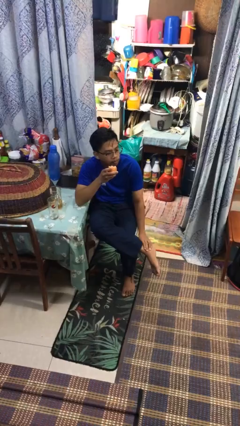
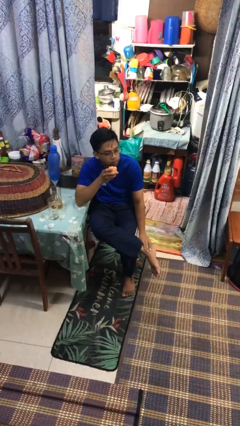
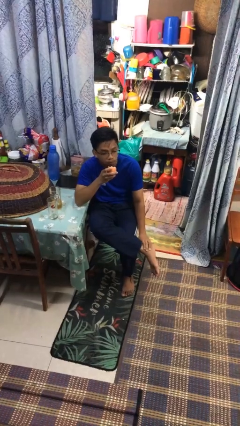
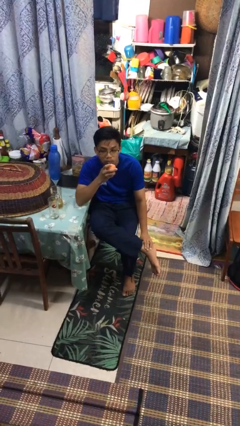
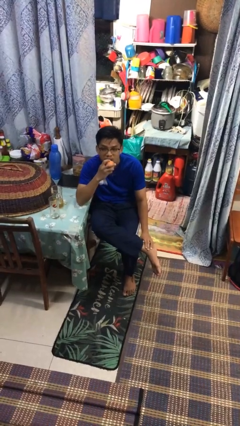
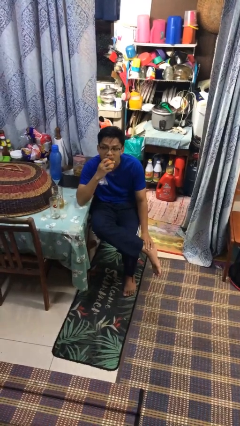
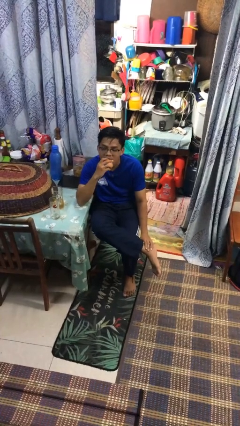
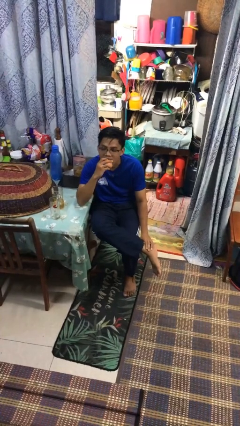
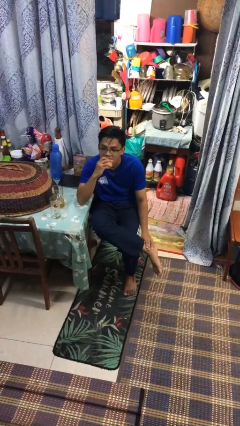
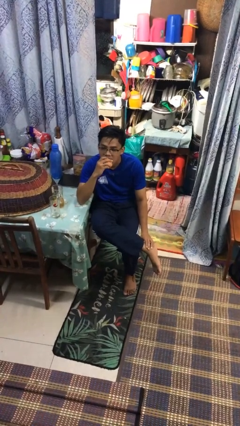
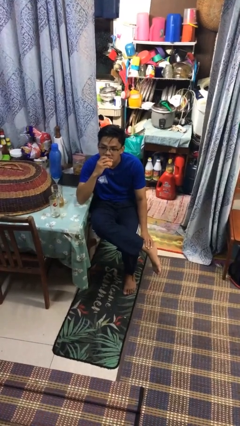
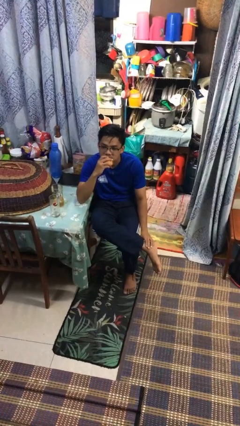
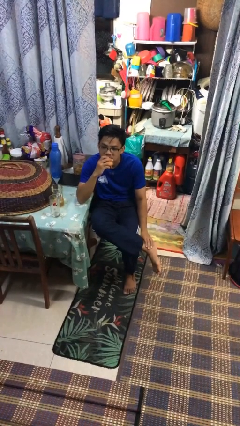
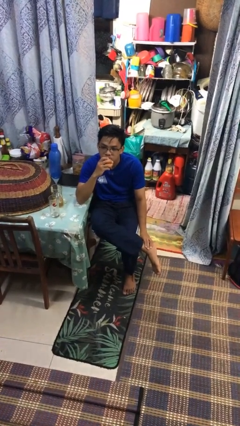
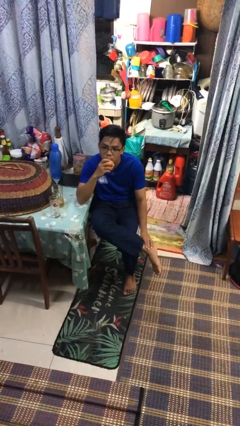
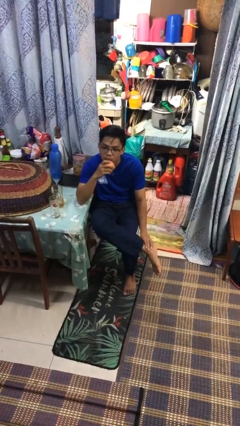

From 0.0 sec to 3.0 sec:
person eats apple

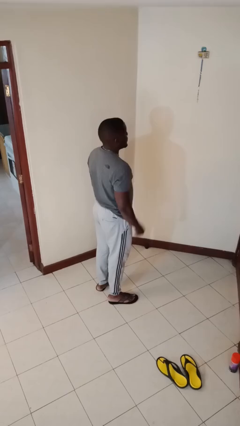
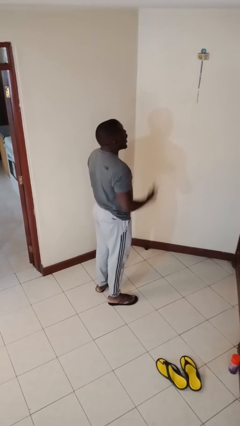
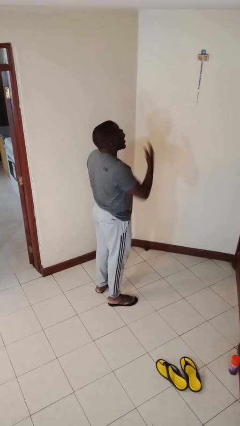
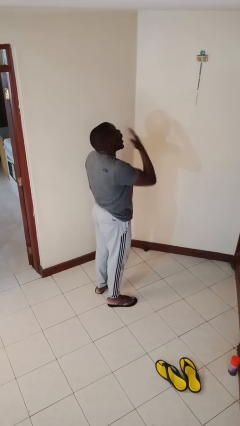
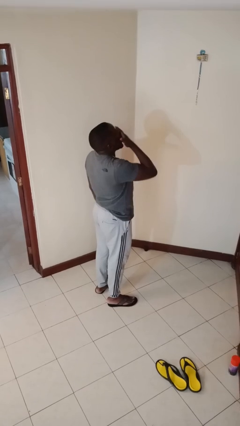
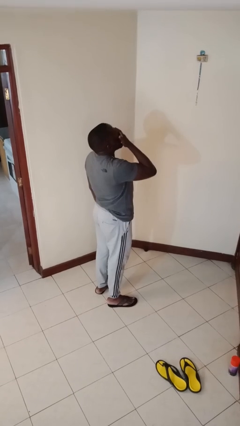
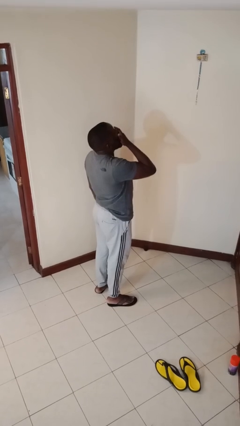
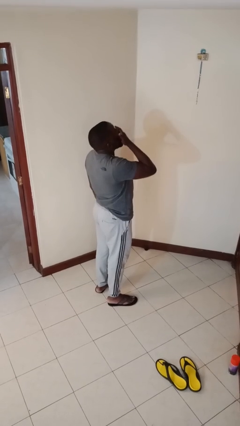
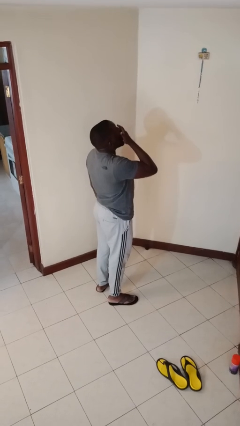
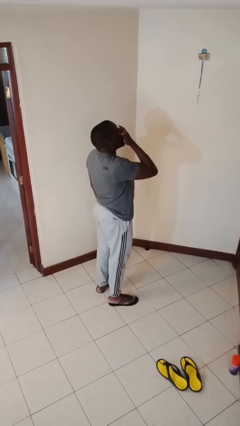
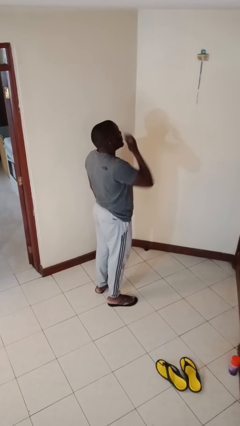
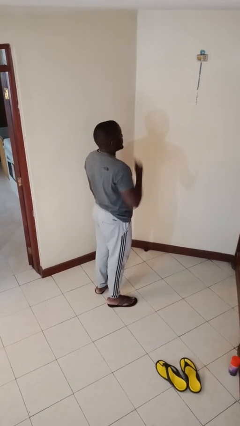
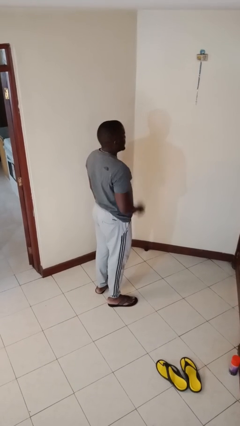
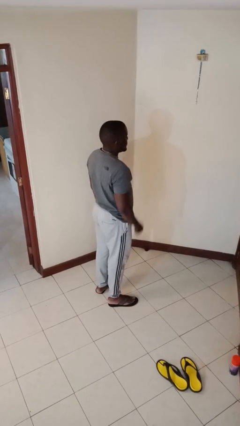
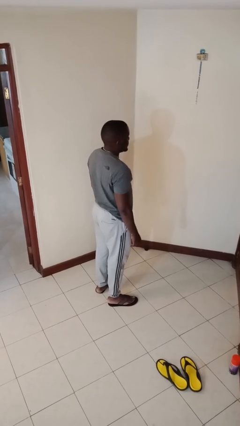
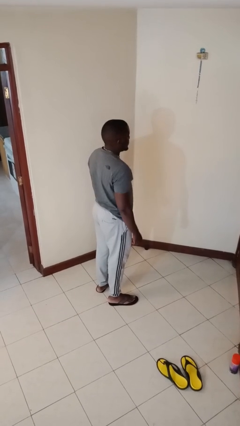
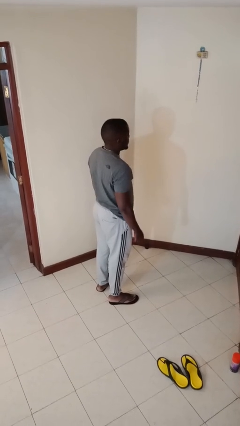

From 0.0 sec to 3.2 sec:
person yawns

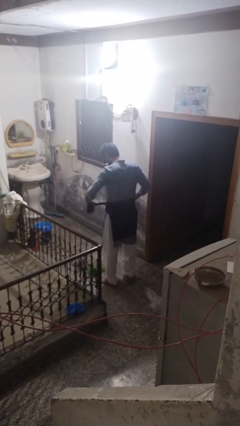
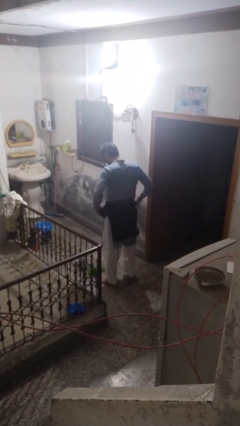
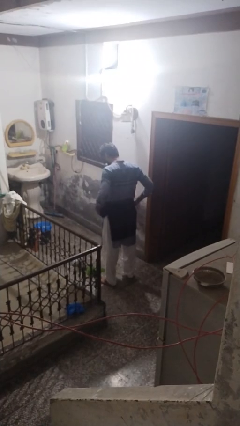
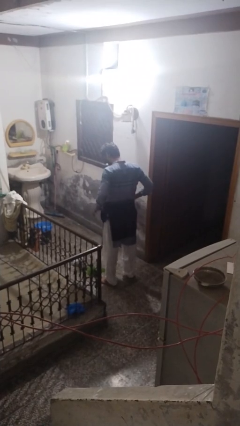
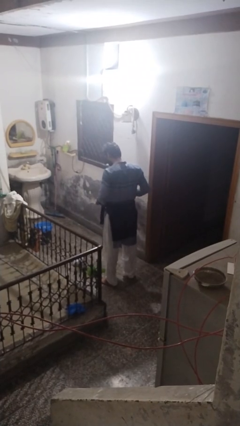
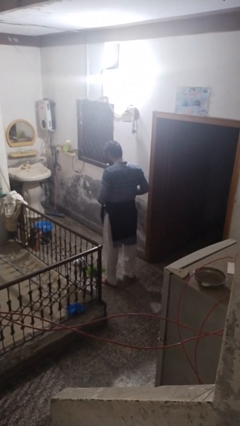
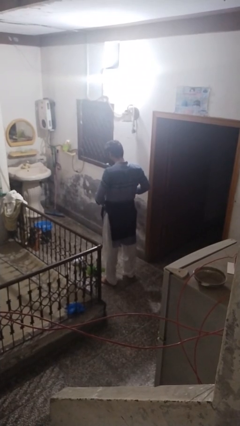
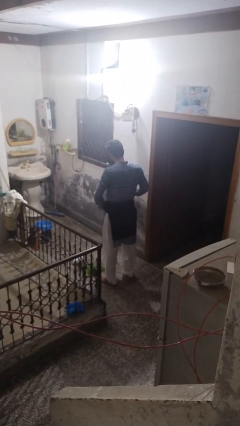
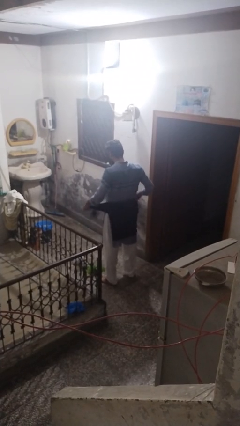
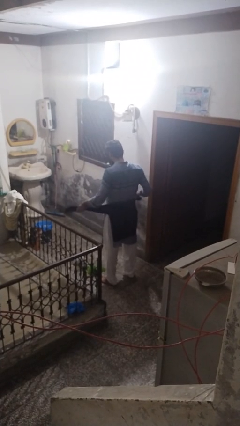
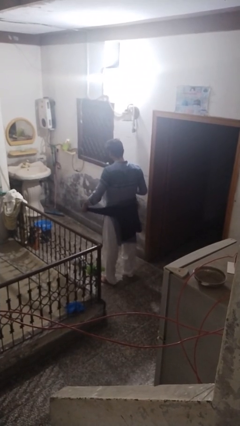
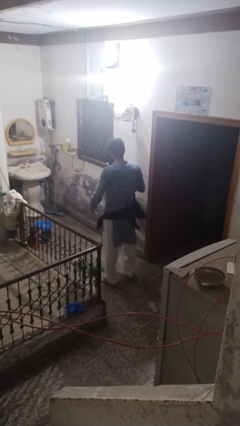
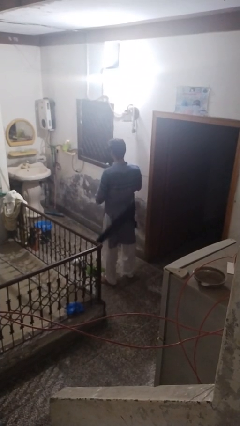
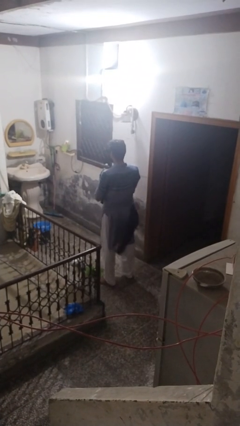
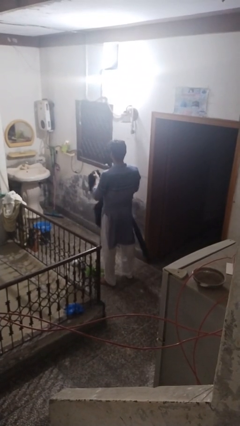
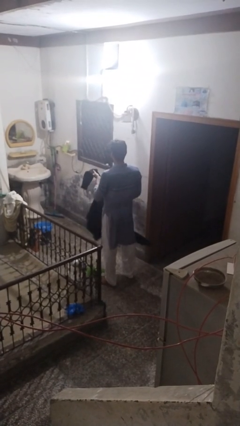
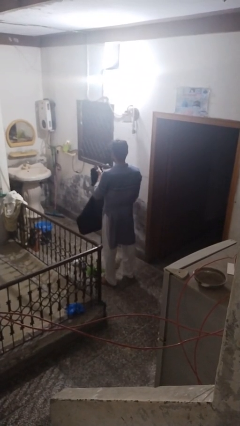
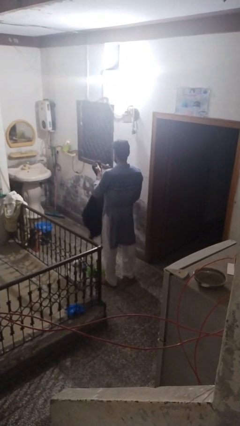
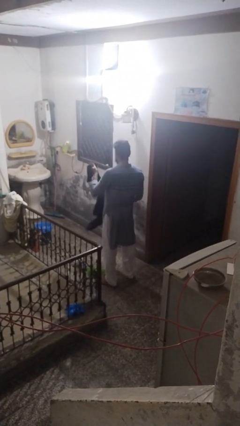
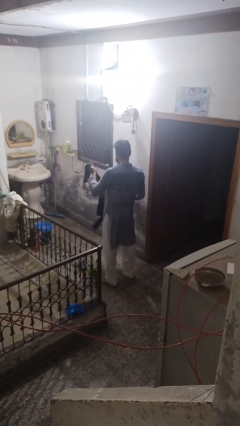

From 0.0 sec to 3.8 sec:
person unties jacket around waist

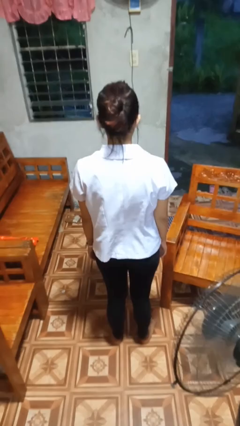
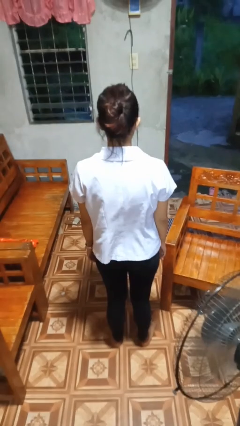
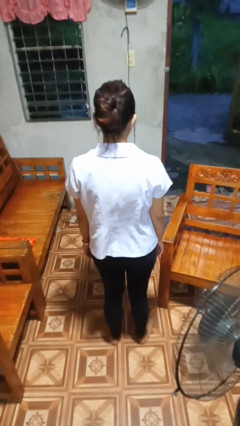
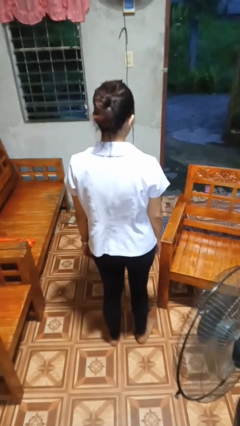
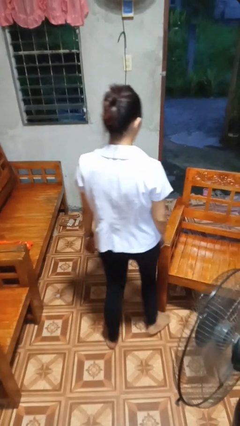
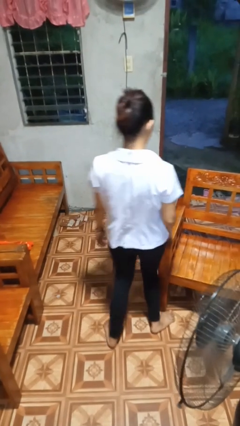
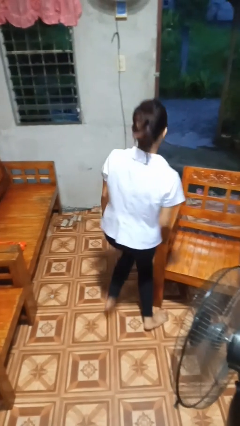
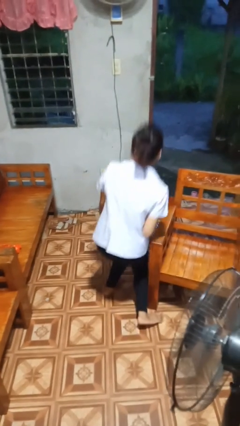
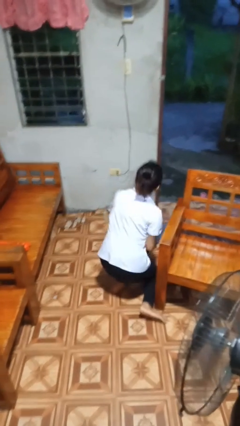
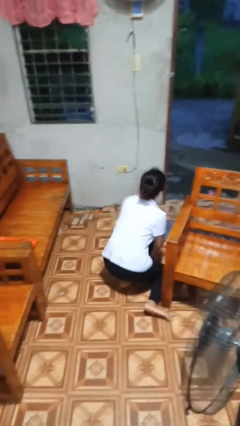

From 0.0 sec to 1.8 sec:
person trips on object on floor

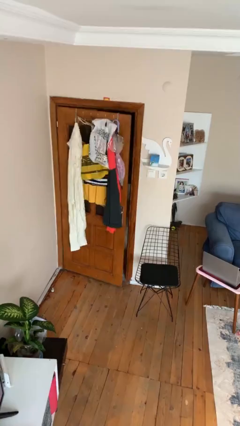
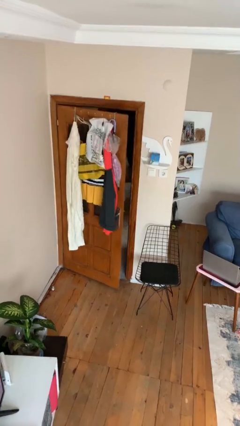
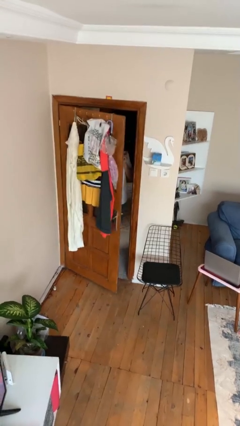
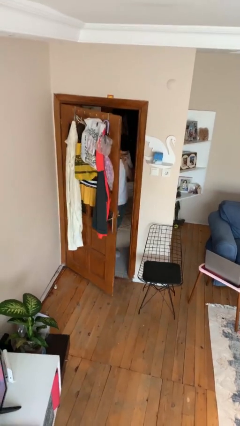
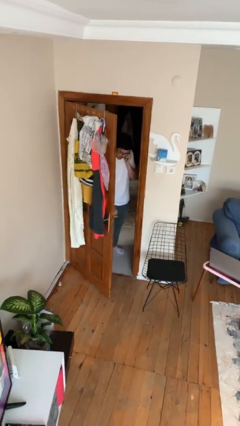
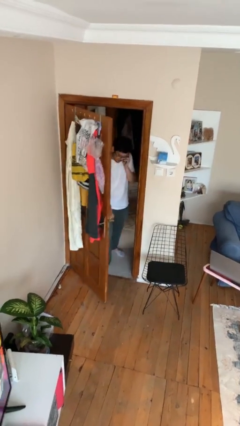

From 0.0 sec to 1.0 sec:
person opens facility door

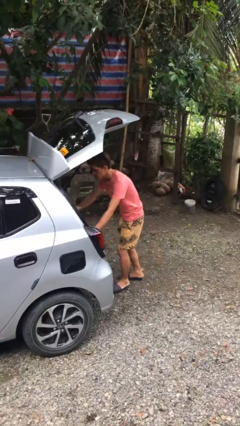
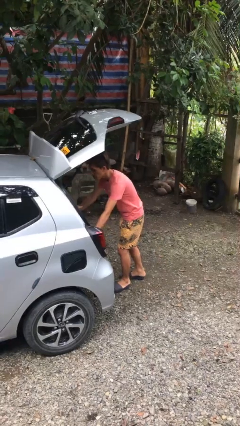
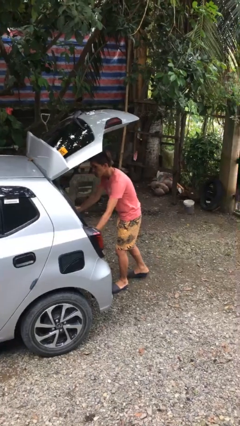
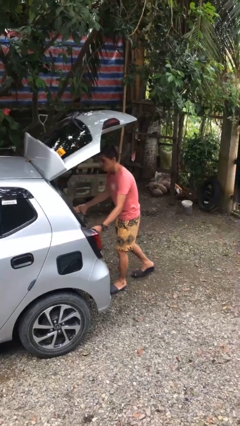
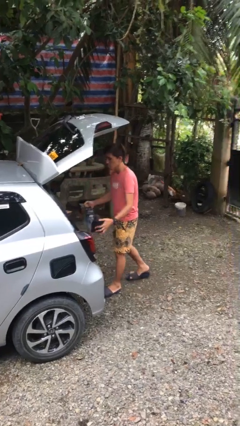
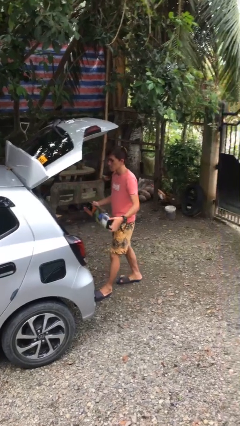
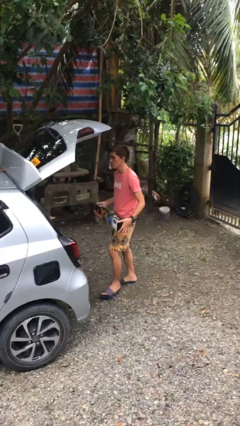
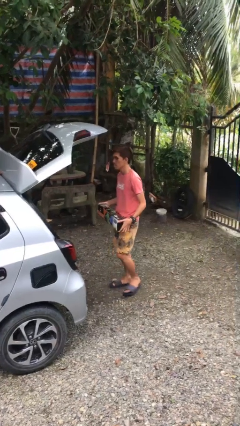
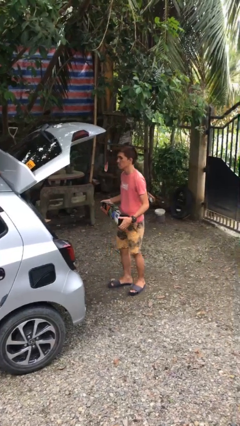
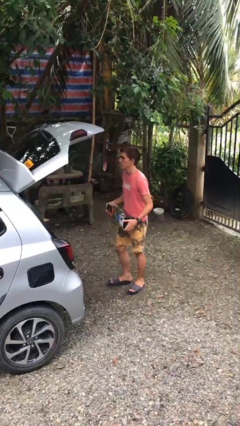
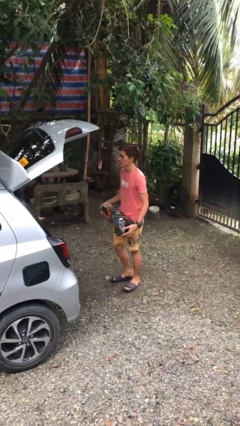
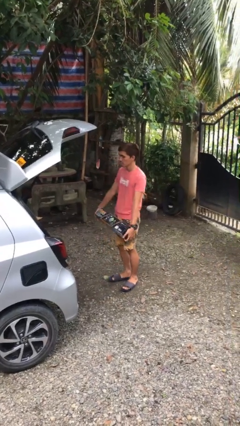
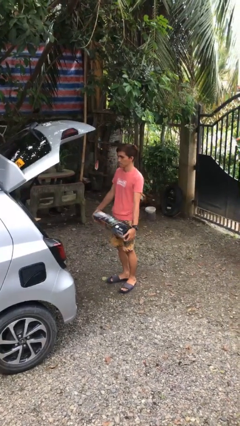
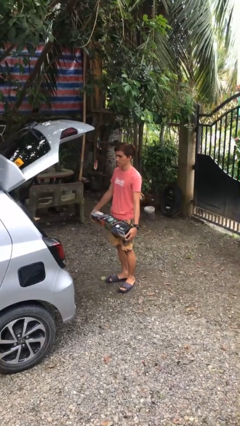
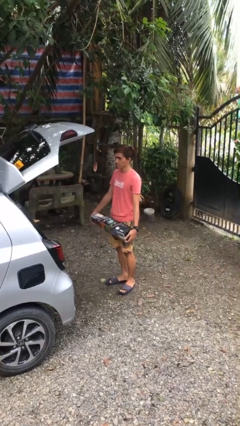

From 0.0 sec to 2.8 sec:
person unloads car

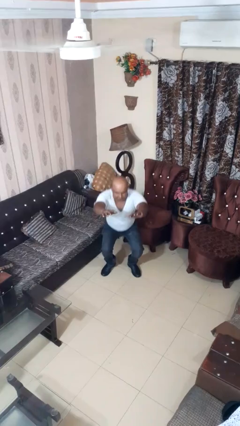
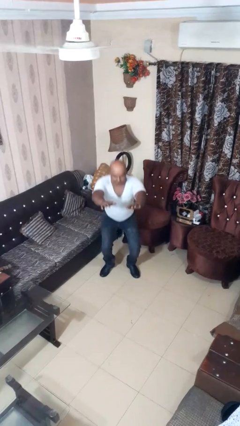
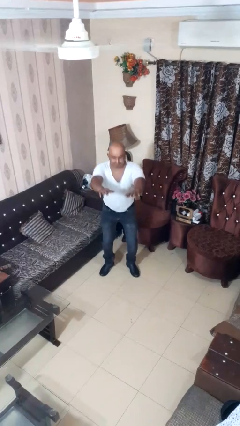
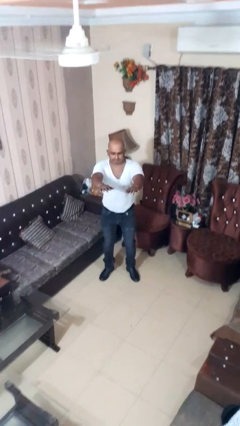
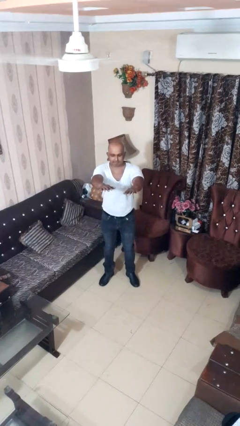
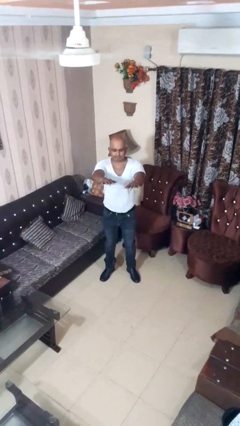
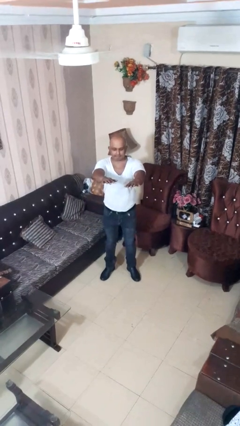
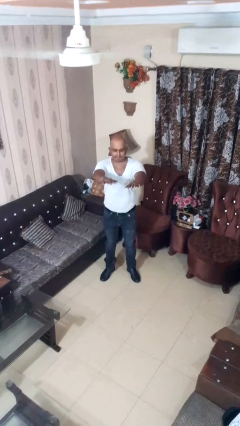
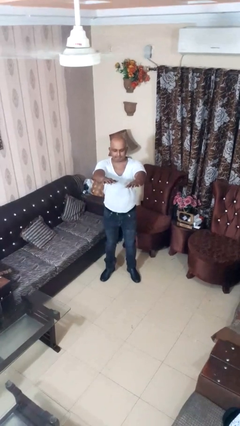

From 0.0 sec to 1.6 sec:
person stands up
